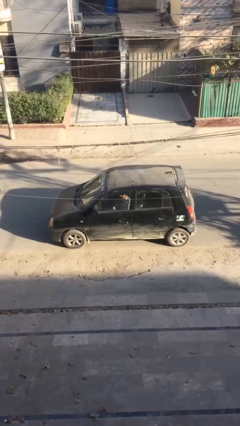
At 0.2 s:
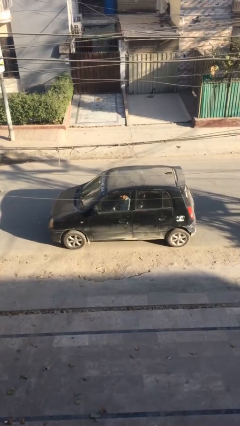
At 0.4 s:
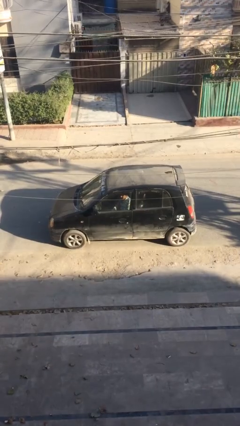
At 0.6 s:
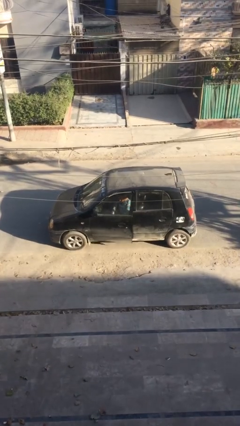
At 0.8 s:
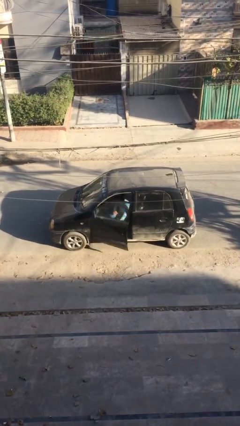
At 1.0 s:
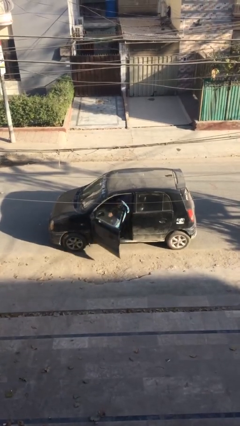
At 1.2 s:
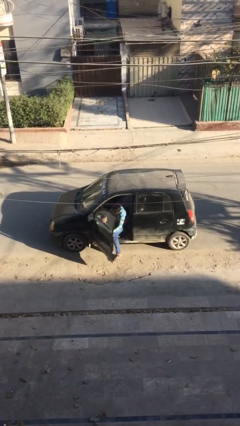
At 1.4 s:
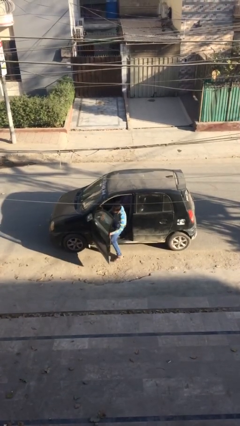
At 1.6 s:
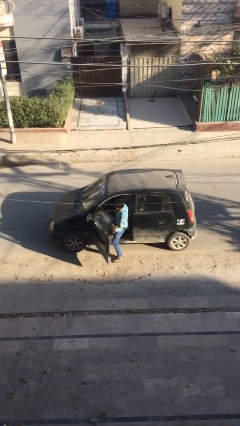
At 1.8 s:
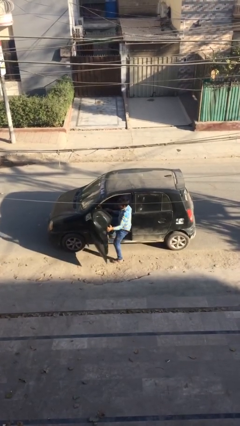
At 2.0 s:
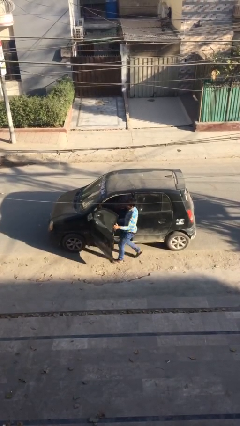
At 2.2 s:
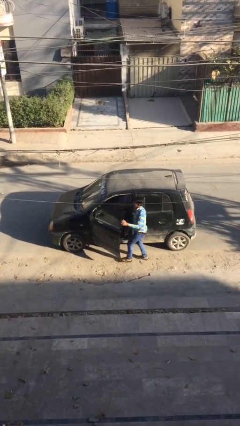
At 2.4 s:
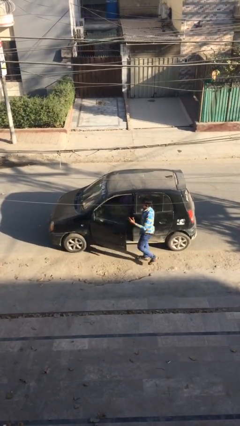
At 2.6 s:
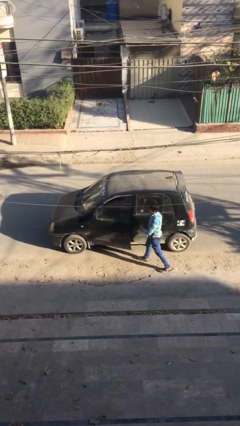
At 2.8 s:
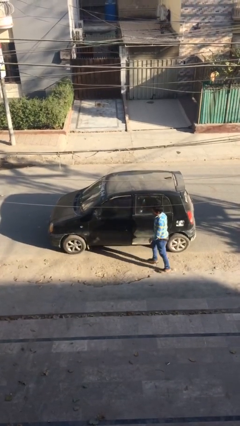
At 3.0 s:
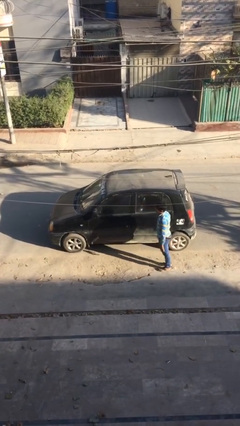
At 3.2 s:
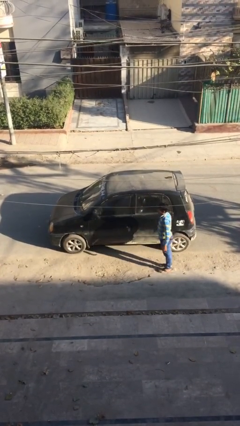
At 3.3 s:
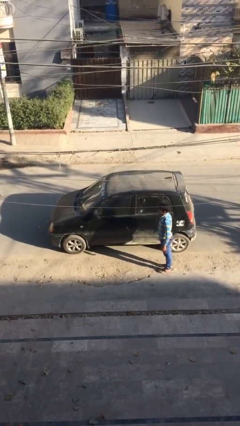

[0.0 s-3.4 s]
car drops off person

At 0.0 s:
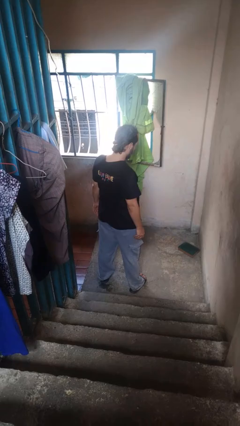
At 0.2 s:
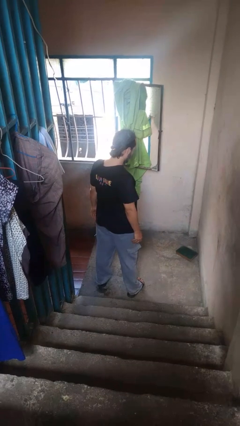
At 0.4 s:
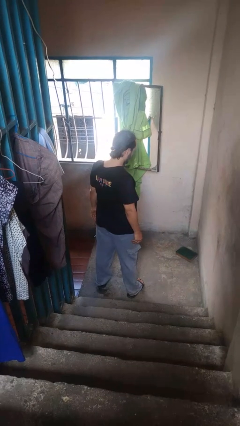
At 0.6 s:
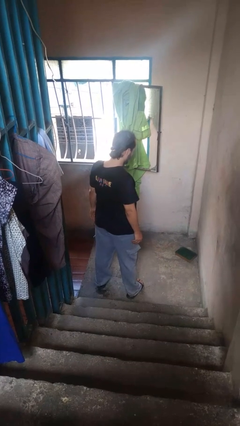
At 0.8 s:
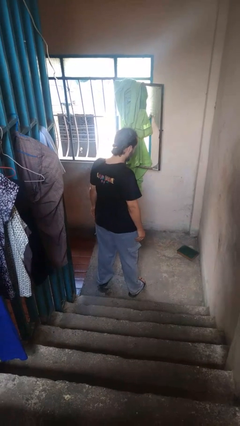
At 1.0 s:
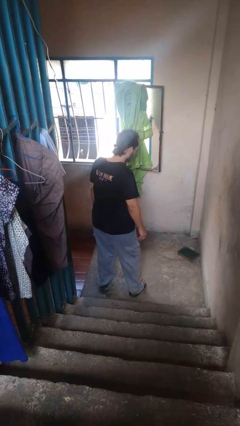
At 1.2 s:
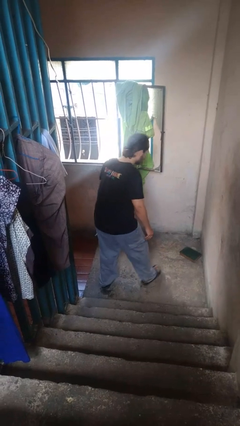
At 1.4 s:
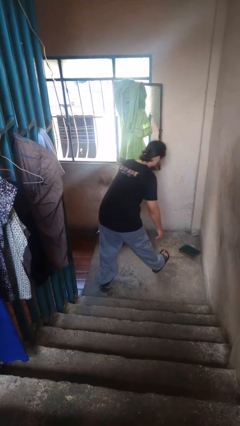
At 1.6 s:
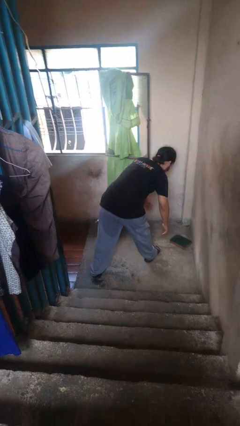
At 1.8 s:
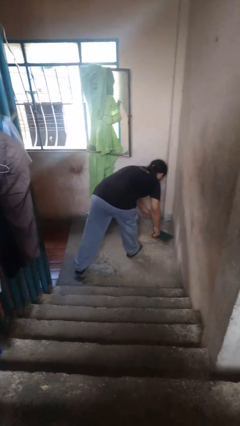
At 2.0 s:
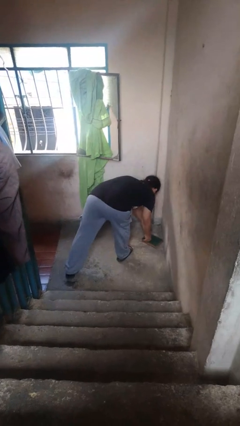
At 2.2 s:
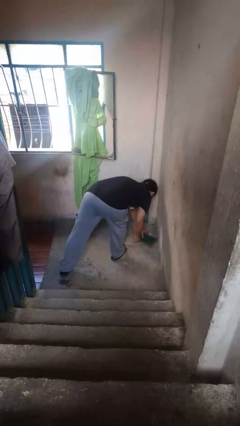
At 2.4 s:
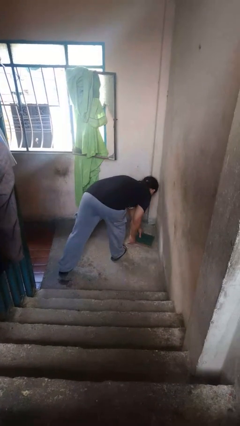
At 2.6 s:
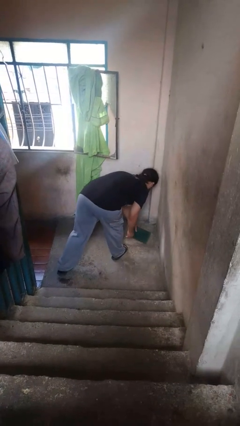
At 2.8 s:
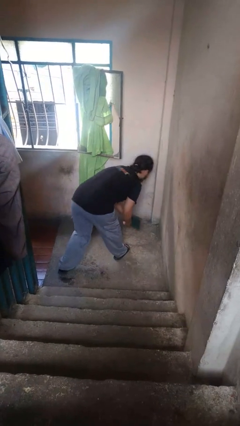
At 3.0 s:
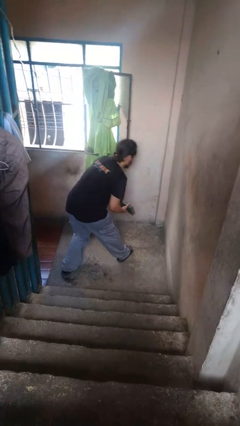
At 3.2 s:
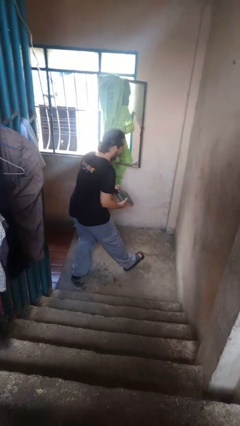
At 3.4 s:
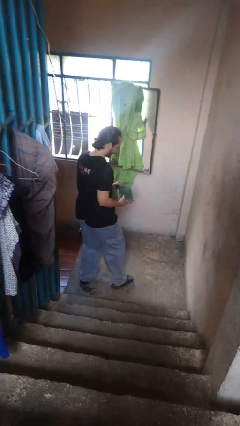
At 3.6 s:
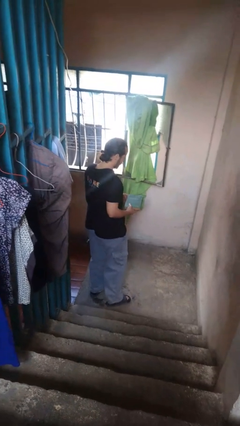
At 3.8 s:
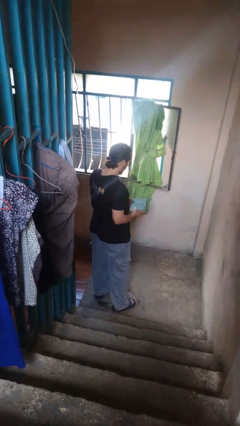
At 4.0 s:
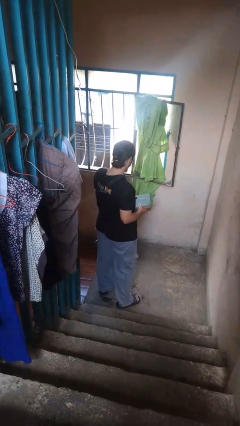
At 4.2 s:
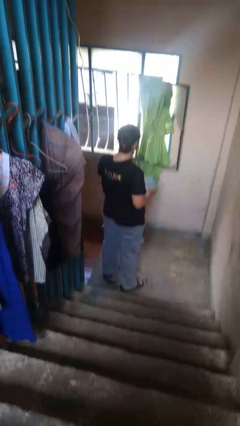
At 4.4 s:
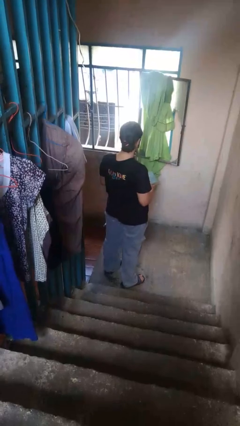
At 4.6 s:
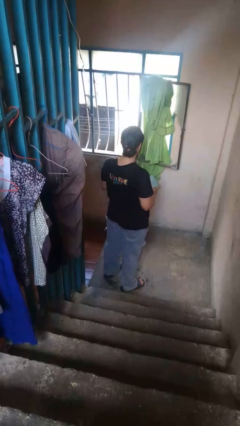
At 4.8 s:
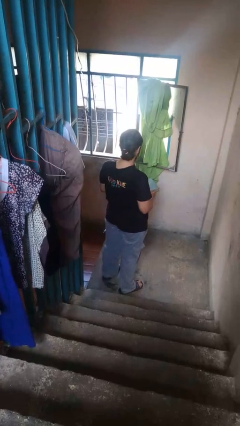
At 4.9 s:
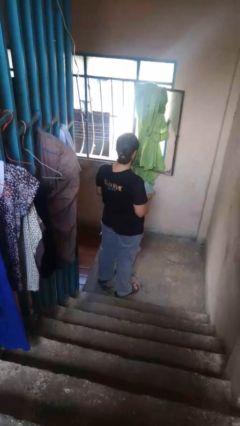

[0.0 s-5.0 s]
person picks up object from floor

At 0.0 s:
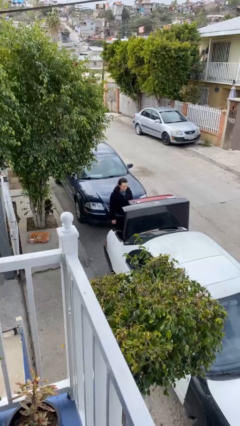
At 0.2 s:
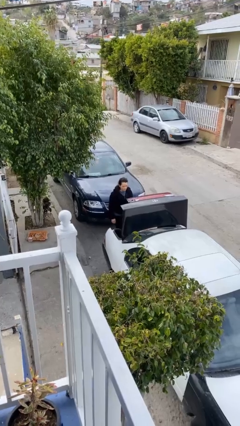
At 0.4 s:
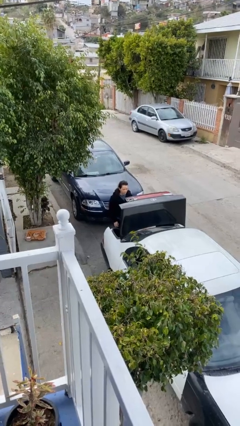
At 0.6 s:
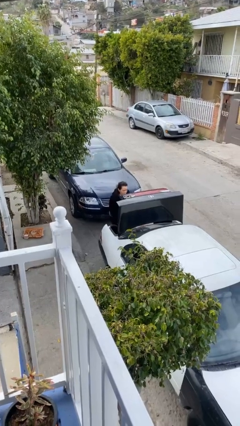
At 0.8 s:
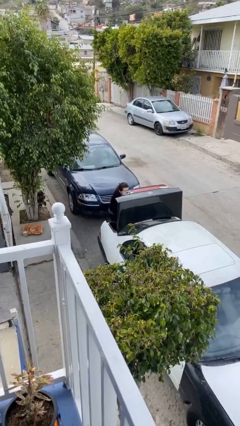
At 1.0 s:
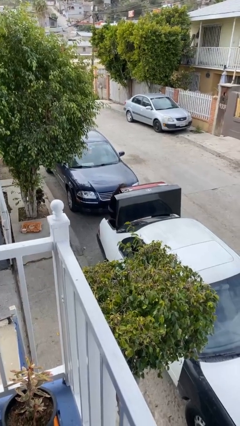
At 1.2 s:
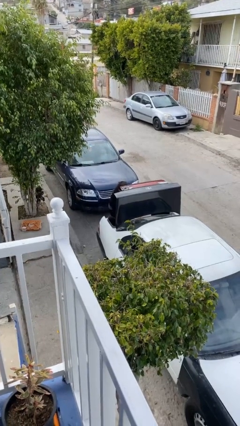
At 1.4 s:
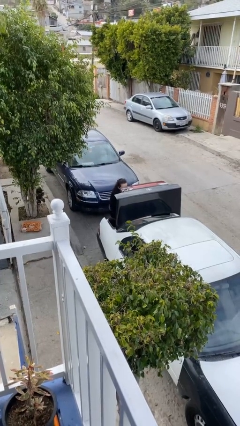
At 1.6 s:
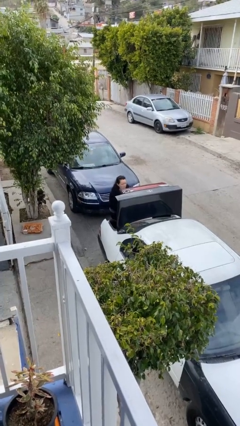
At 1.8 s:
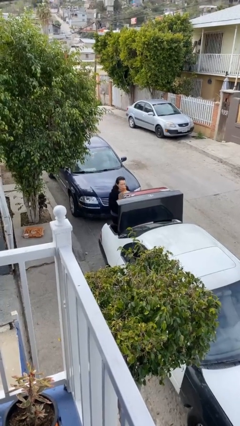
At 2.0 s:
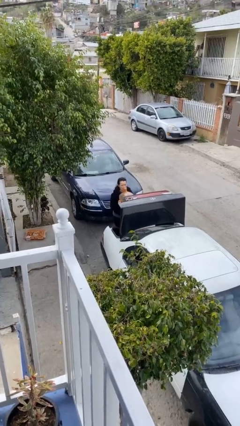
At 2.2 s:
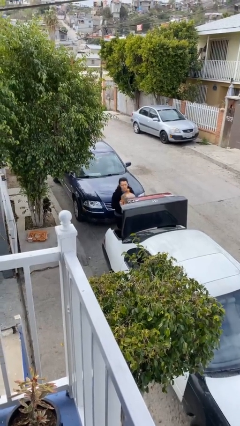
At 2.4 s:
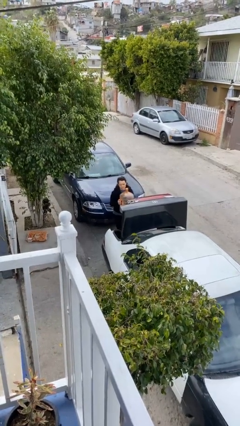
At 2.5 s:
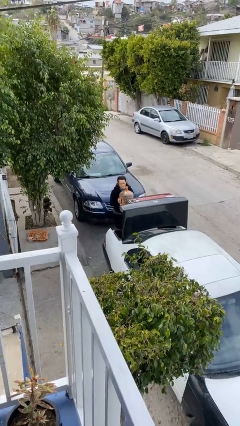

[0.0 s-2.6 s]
person unloads car

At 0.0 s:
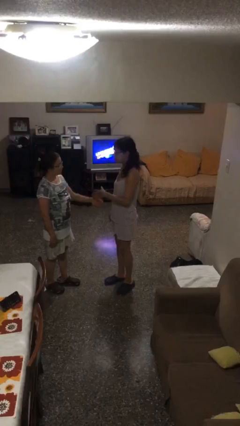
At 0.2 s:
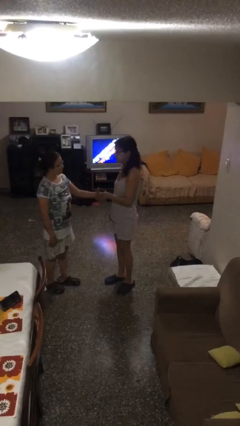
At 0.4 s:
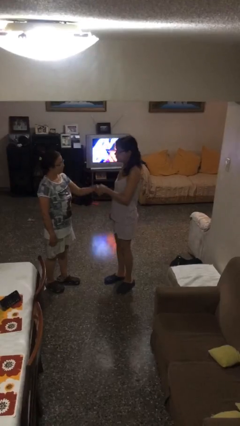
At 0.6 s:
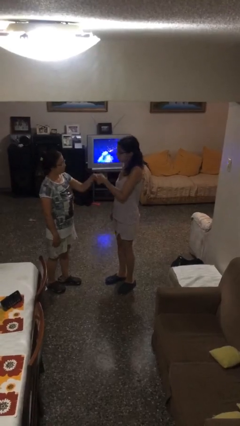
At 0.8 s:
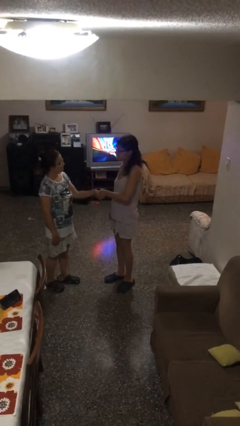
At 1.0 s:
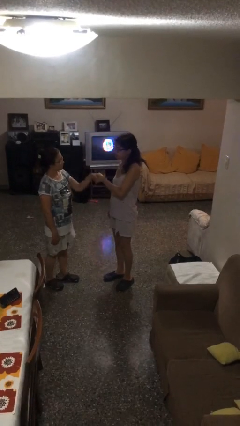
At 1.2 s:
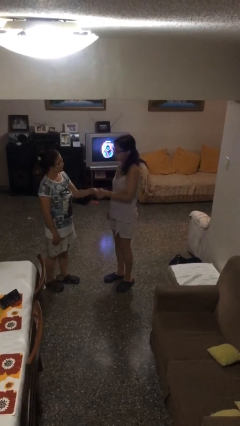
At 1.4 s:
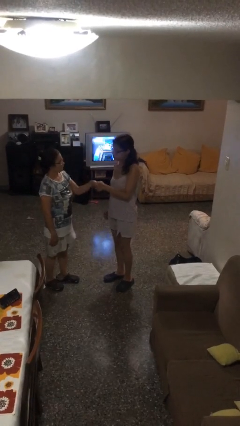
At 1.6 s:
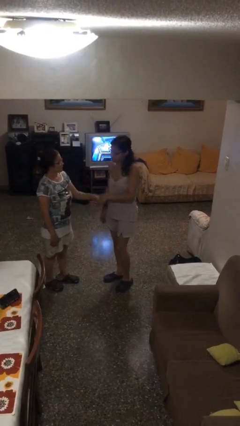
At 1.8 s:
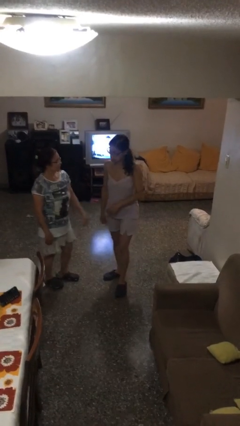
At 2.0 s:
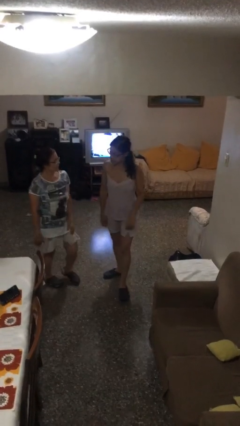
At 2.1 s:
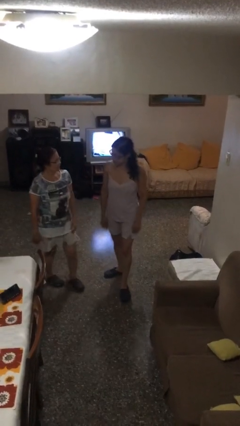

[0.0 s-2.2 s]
person shakes hand

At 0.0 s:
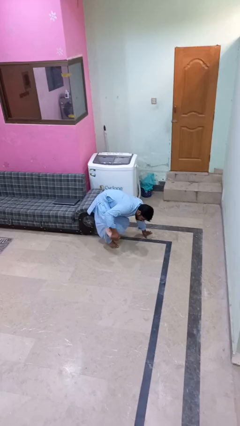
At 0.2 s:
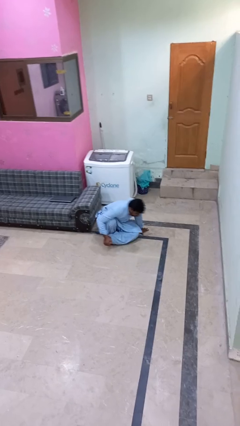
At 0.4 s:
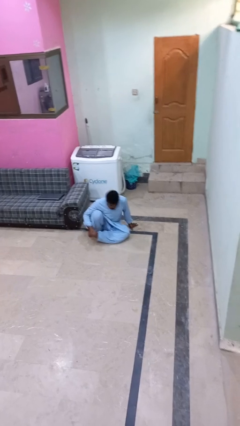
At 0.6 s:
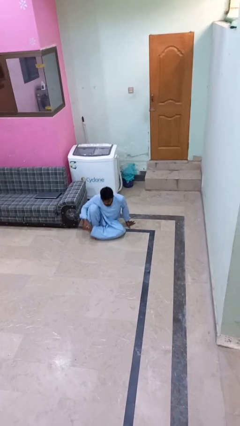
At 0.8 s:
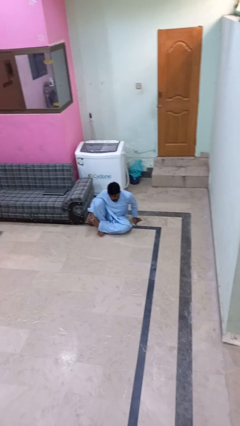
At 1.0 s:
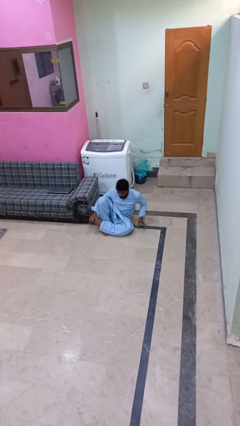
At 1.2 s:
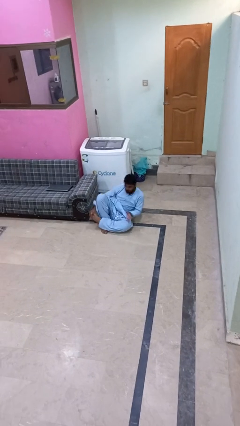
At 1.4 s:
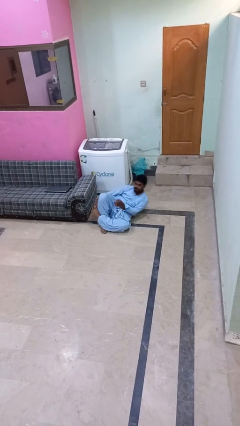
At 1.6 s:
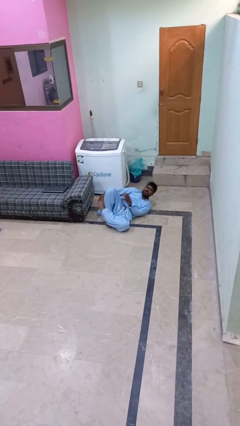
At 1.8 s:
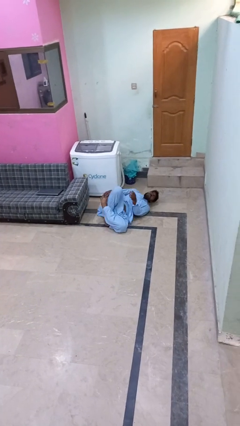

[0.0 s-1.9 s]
person lies down on floor

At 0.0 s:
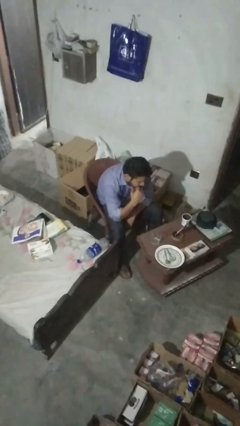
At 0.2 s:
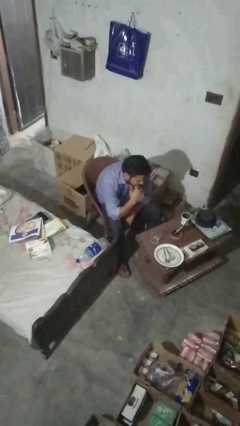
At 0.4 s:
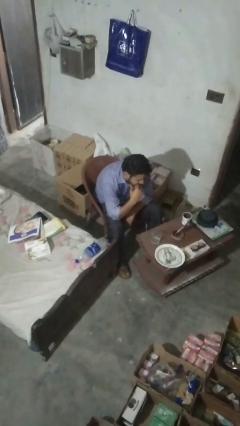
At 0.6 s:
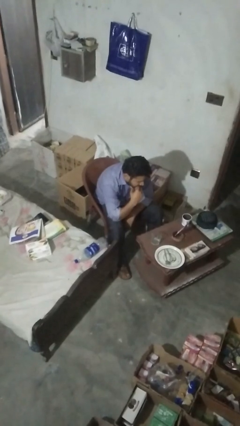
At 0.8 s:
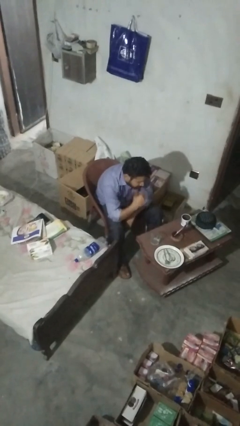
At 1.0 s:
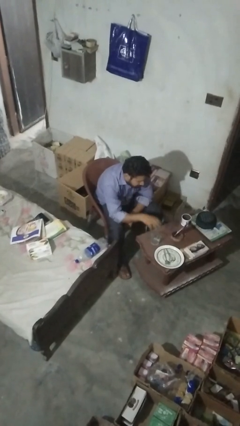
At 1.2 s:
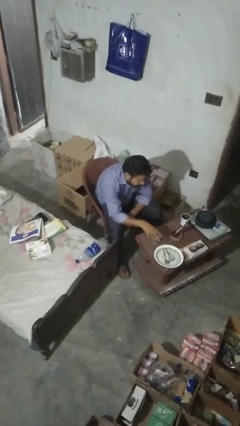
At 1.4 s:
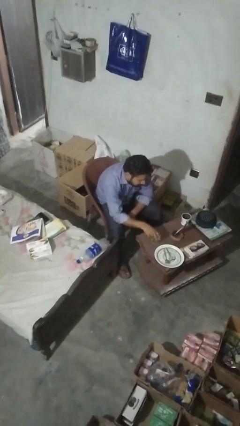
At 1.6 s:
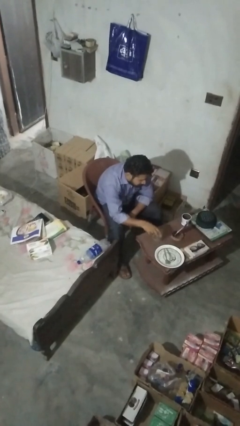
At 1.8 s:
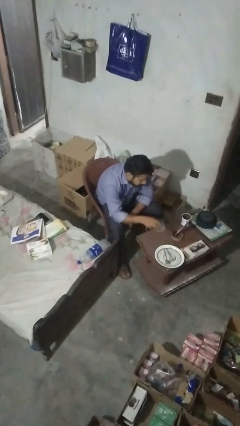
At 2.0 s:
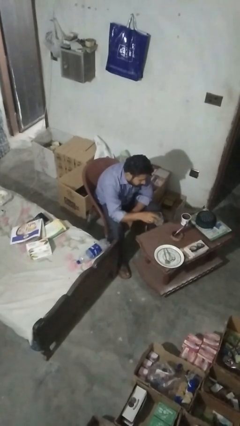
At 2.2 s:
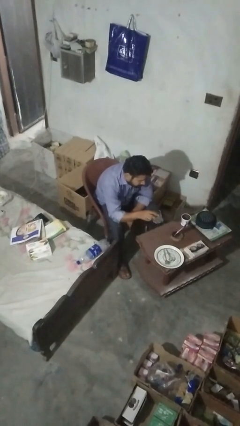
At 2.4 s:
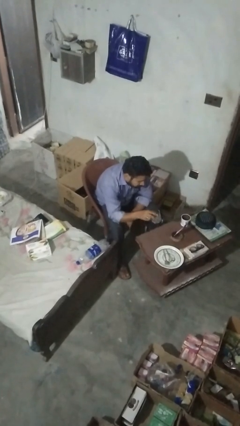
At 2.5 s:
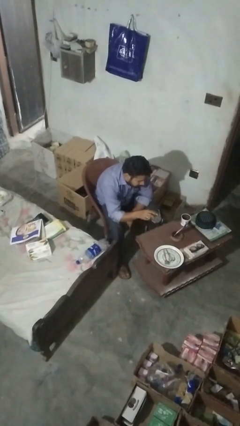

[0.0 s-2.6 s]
person picks up object from table
